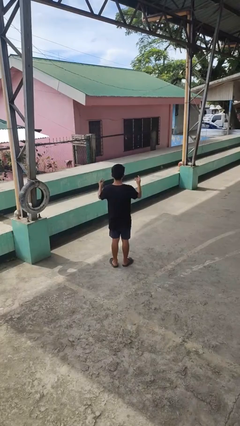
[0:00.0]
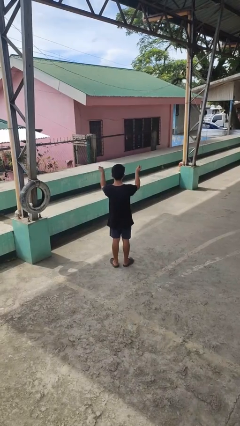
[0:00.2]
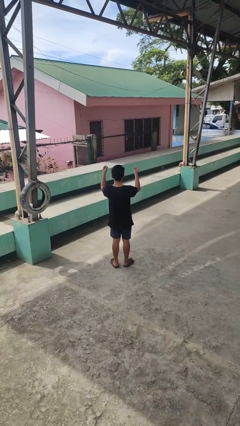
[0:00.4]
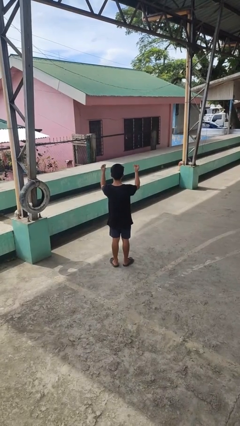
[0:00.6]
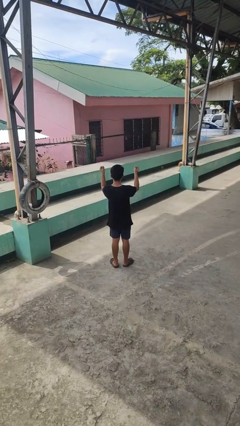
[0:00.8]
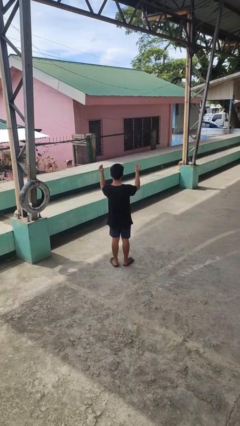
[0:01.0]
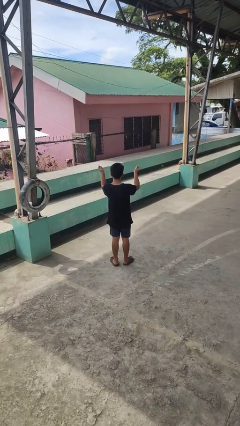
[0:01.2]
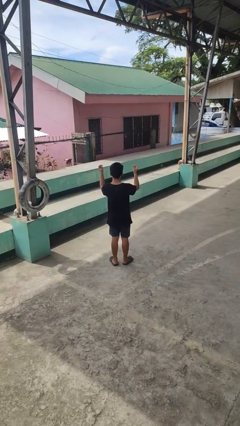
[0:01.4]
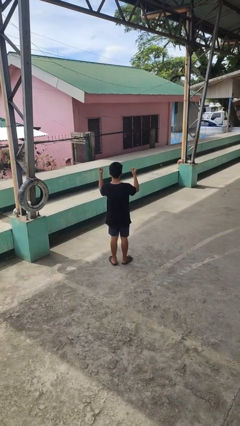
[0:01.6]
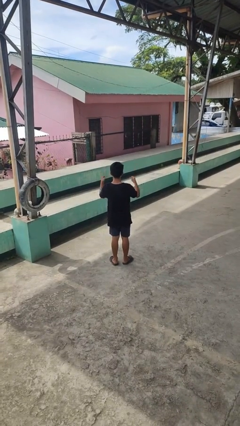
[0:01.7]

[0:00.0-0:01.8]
person snaps fingers

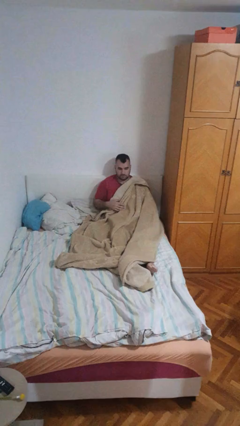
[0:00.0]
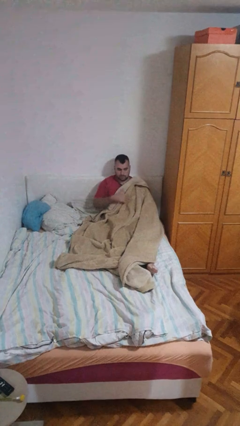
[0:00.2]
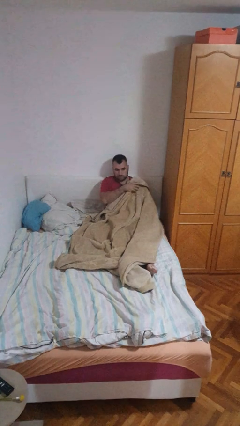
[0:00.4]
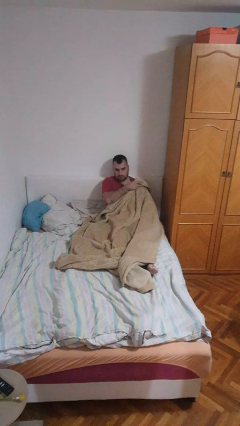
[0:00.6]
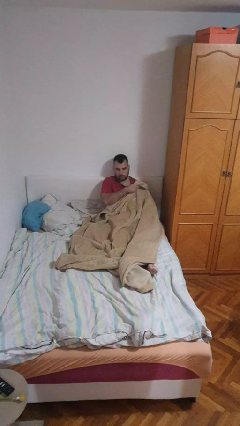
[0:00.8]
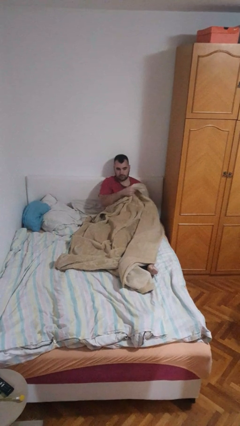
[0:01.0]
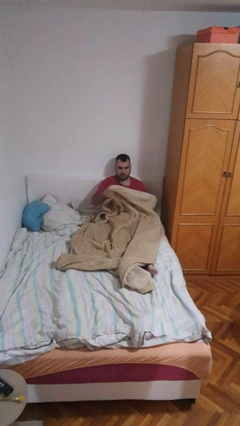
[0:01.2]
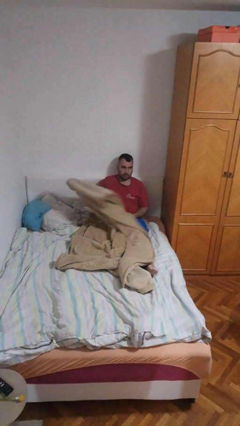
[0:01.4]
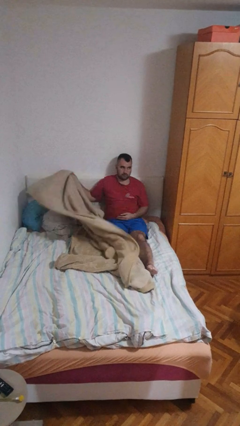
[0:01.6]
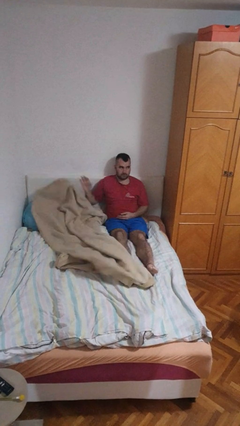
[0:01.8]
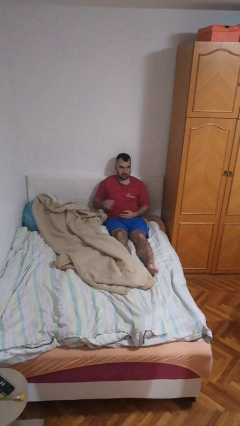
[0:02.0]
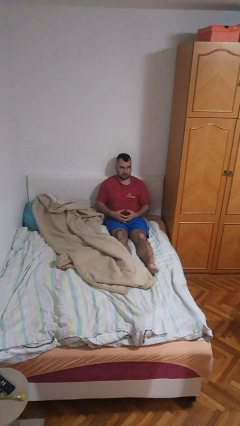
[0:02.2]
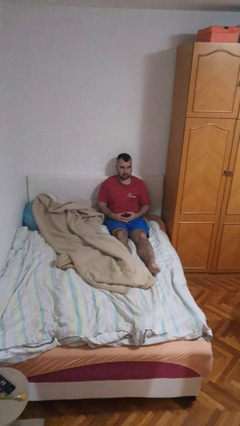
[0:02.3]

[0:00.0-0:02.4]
person uncovers with blanket

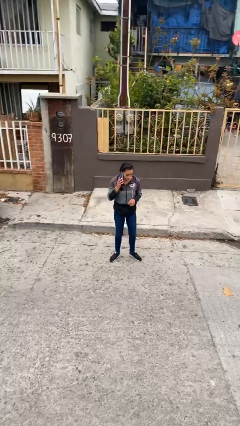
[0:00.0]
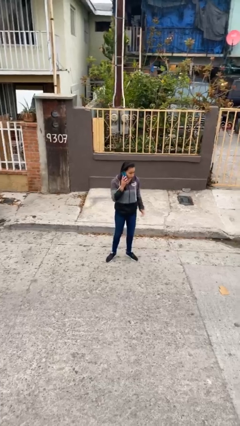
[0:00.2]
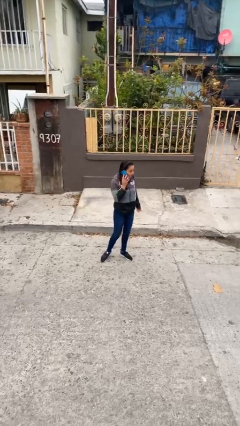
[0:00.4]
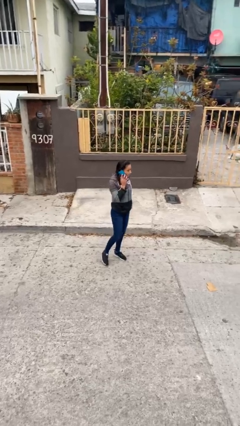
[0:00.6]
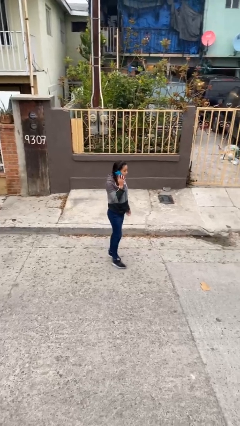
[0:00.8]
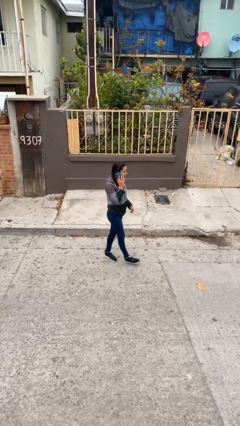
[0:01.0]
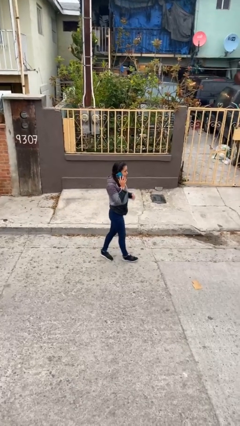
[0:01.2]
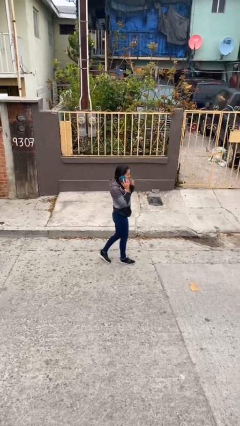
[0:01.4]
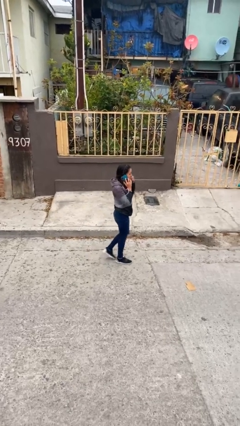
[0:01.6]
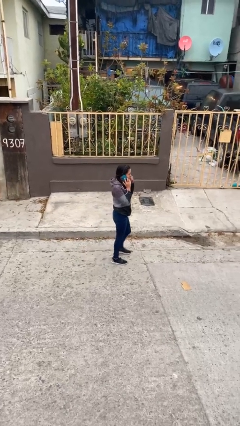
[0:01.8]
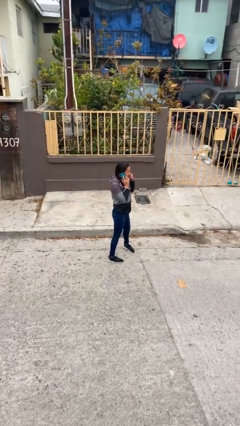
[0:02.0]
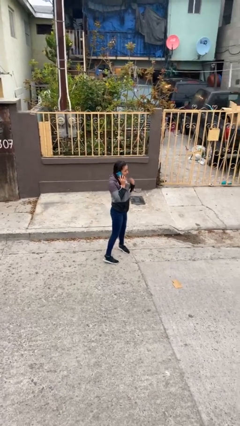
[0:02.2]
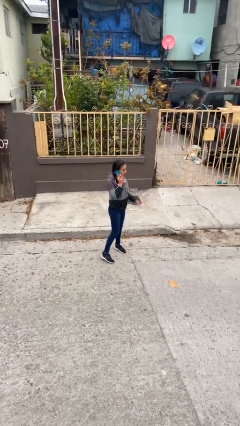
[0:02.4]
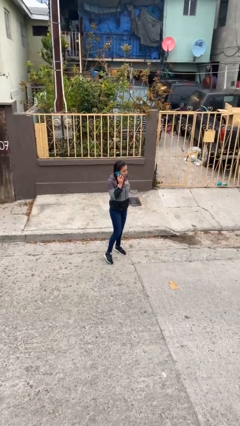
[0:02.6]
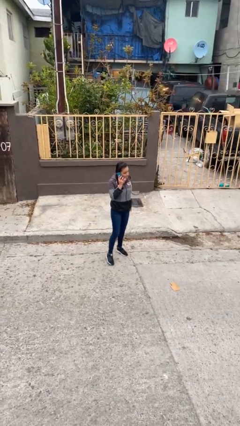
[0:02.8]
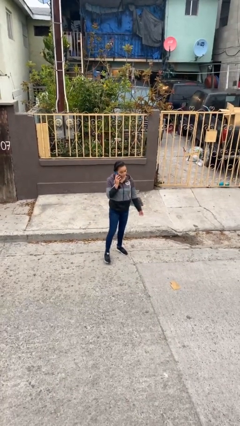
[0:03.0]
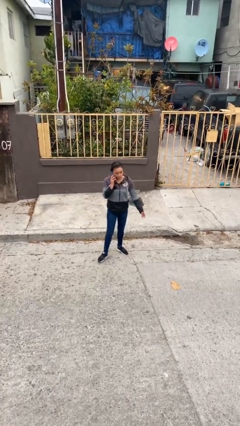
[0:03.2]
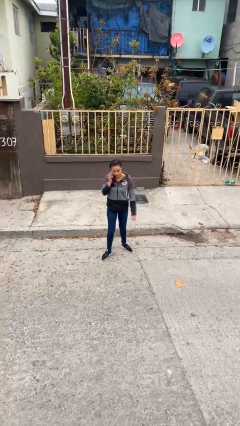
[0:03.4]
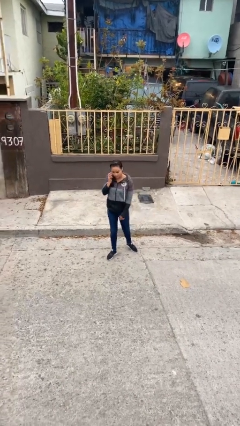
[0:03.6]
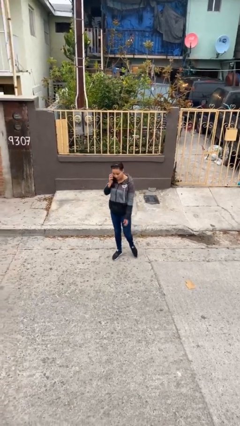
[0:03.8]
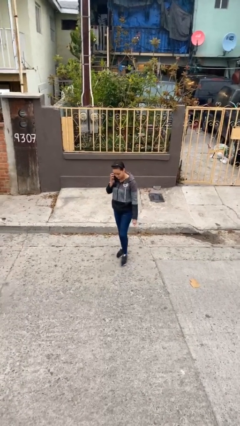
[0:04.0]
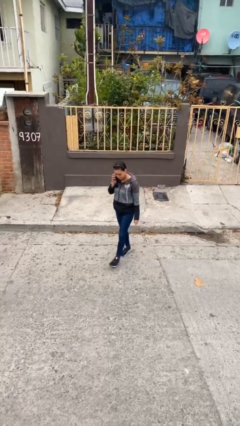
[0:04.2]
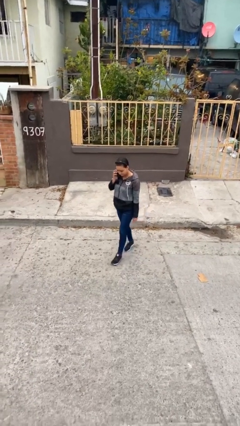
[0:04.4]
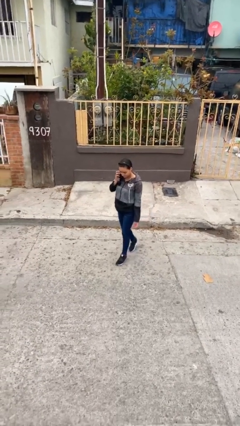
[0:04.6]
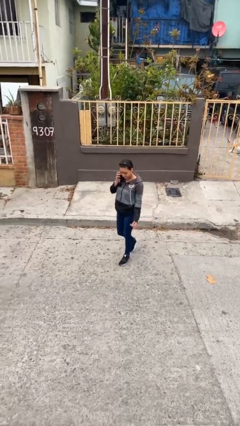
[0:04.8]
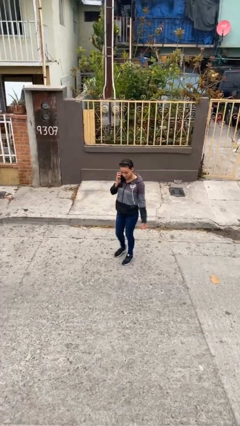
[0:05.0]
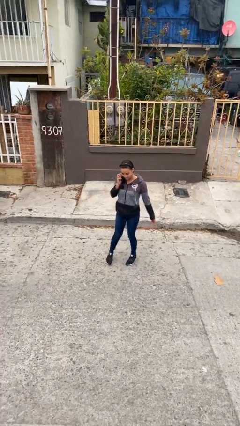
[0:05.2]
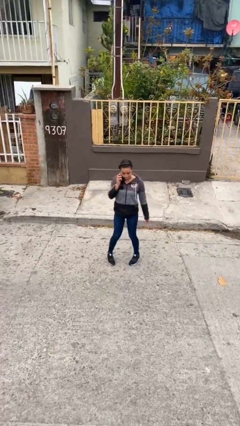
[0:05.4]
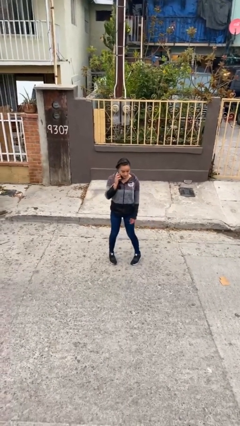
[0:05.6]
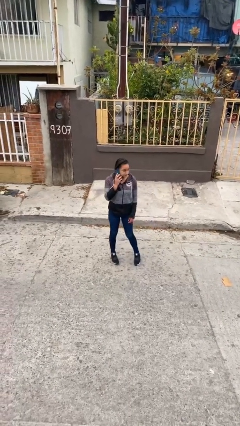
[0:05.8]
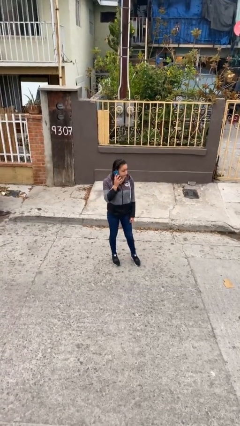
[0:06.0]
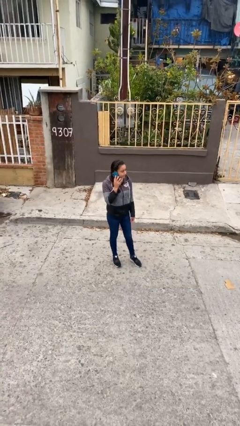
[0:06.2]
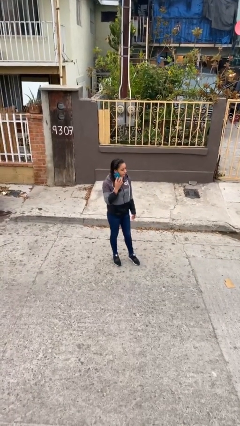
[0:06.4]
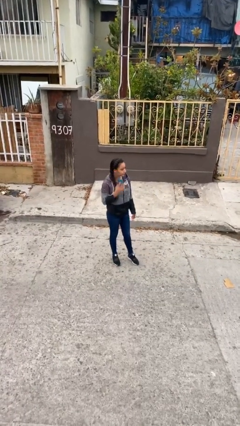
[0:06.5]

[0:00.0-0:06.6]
person talks on phone

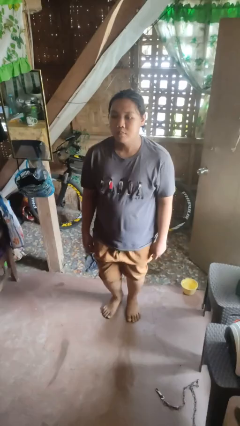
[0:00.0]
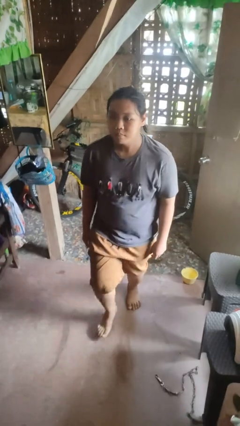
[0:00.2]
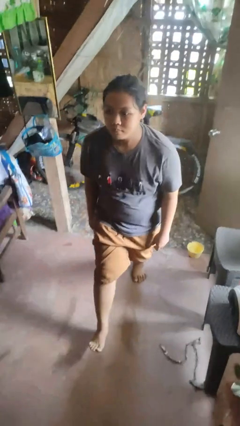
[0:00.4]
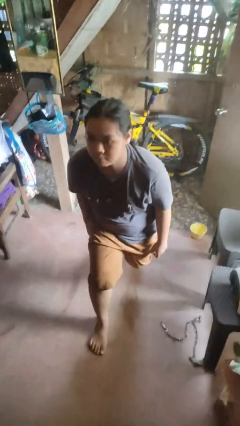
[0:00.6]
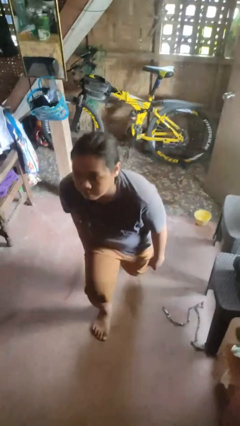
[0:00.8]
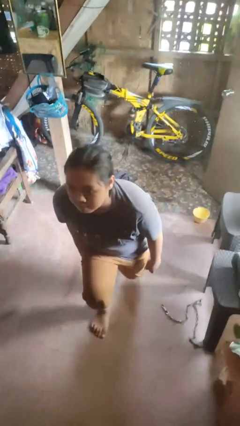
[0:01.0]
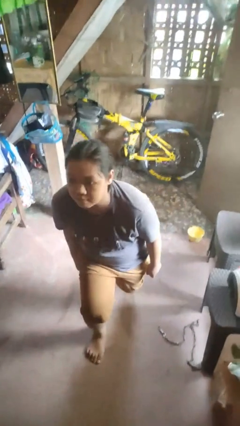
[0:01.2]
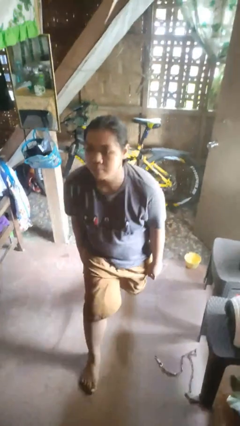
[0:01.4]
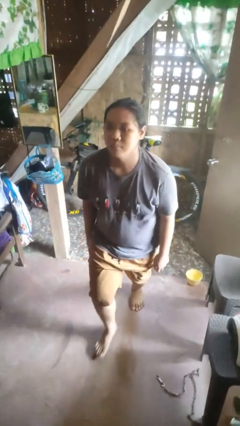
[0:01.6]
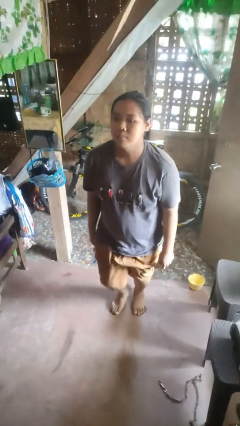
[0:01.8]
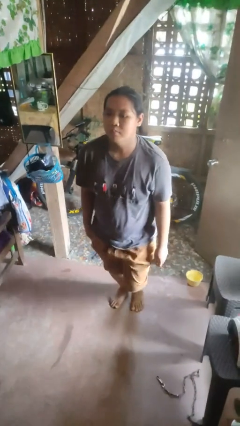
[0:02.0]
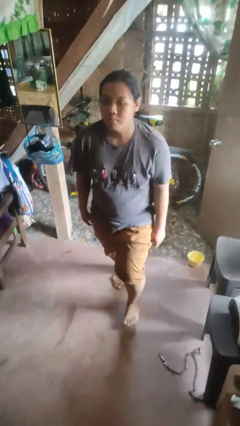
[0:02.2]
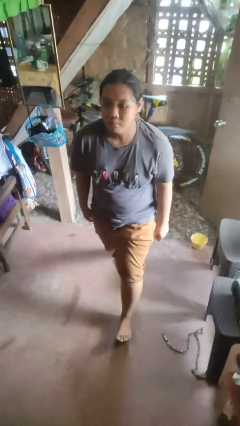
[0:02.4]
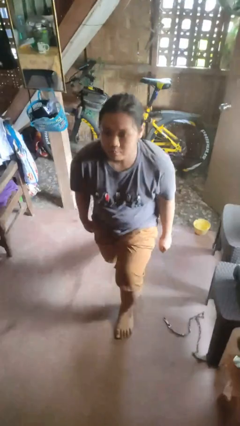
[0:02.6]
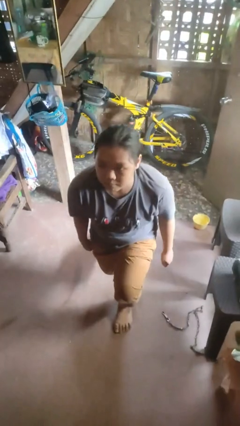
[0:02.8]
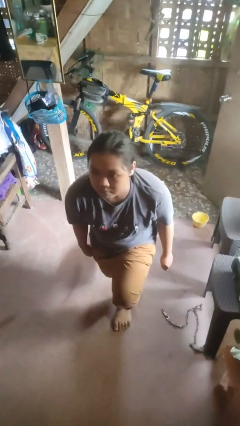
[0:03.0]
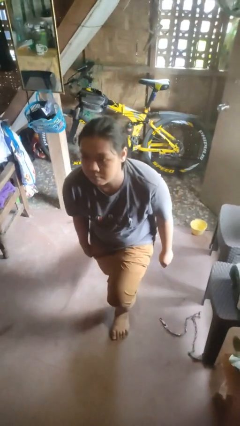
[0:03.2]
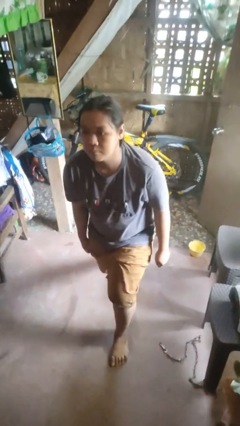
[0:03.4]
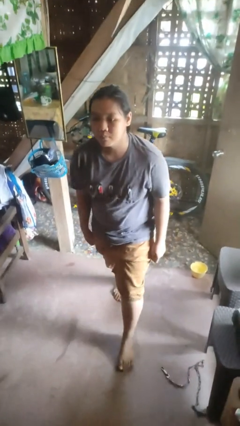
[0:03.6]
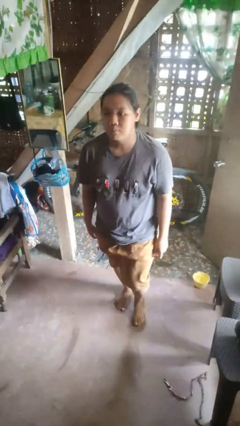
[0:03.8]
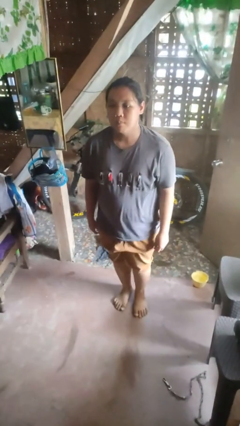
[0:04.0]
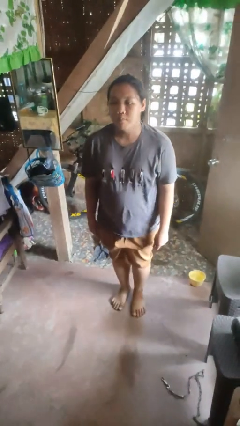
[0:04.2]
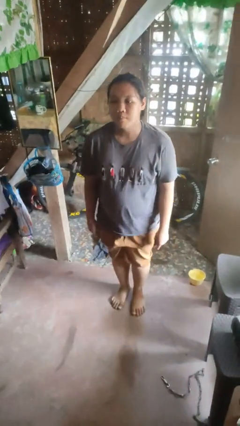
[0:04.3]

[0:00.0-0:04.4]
person exercises with lunges

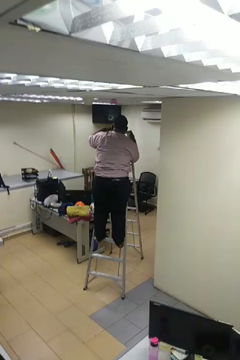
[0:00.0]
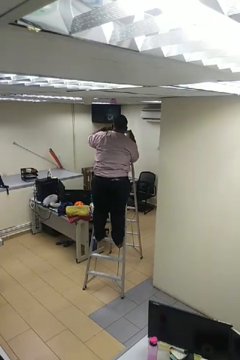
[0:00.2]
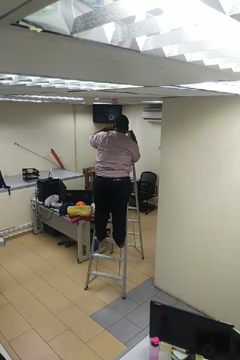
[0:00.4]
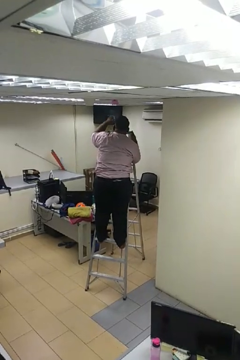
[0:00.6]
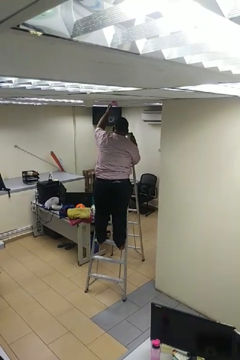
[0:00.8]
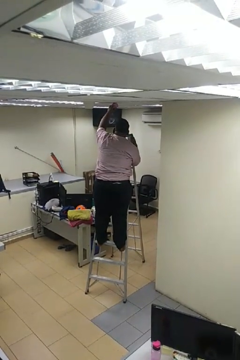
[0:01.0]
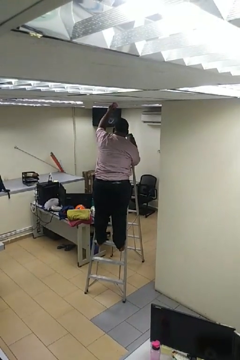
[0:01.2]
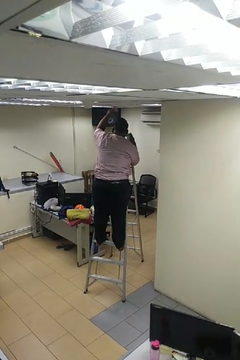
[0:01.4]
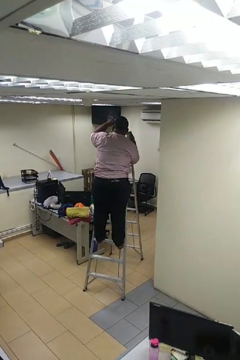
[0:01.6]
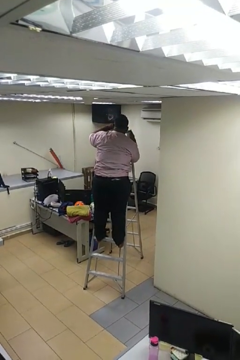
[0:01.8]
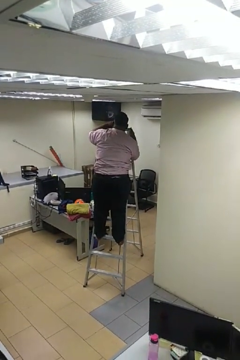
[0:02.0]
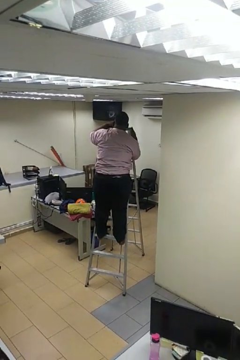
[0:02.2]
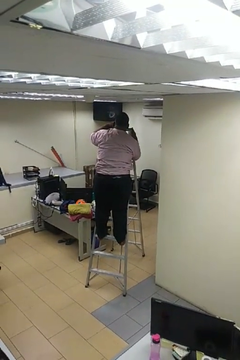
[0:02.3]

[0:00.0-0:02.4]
person takes down smoke detector
